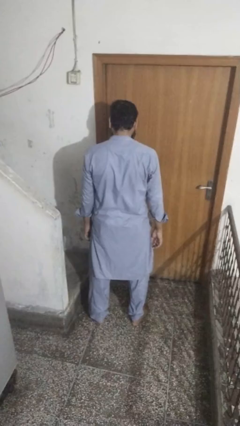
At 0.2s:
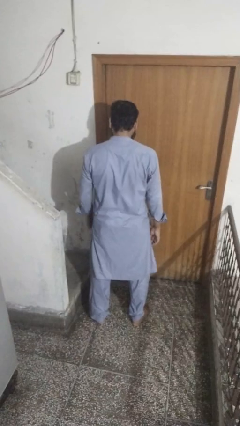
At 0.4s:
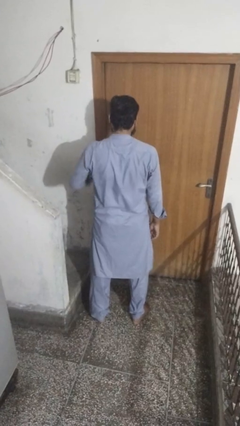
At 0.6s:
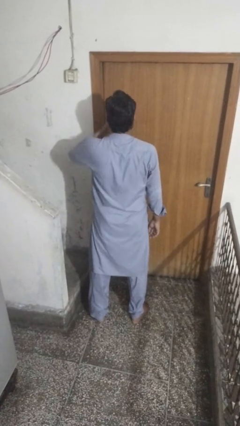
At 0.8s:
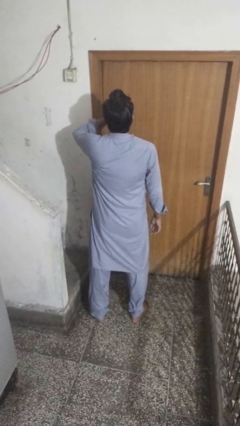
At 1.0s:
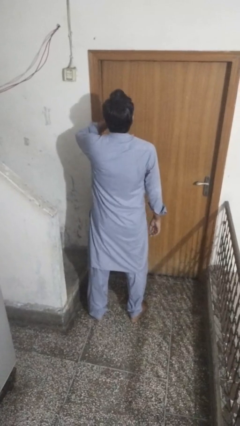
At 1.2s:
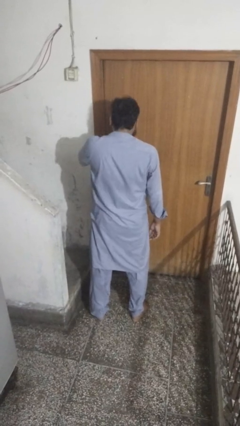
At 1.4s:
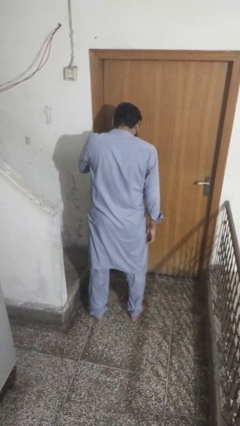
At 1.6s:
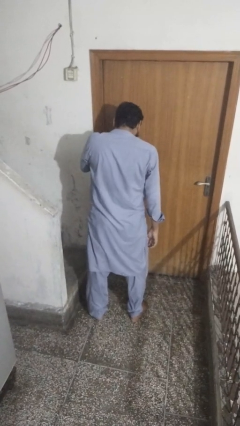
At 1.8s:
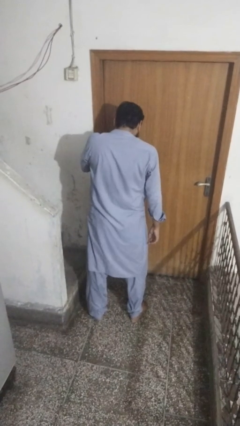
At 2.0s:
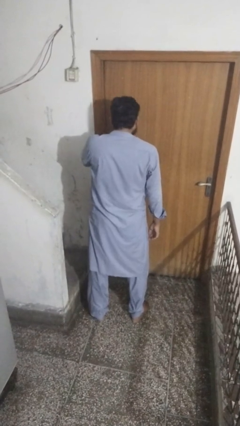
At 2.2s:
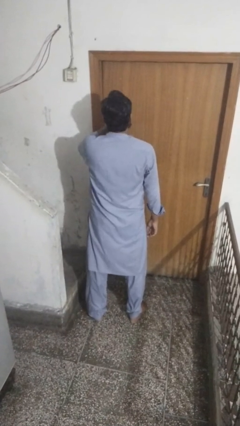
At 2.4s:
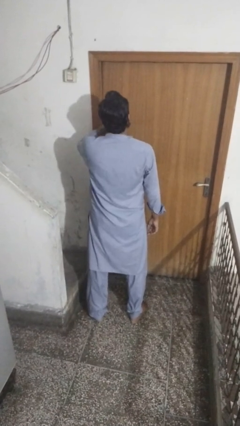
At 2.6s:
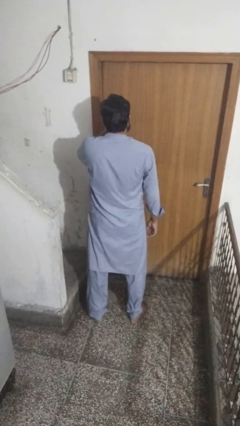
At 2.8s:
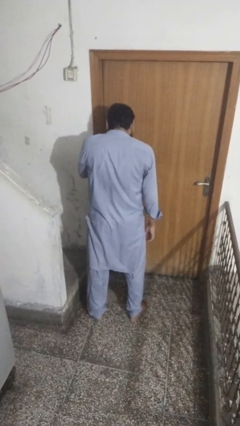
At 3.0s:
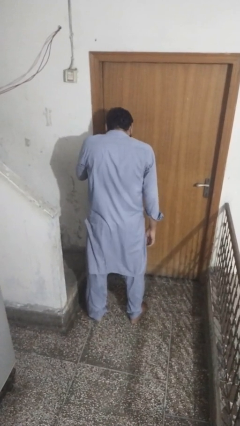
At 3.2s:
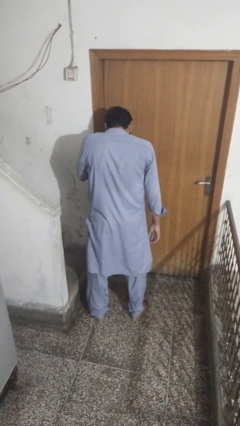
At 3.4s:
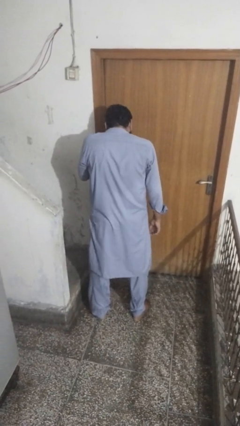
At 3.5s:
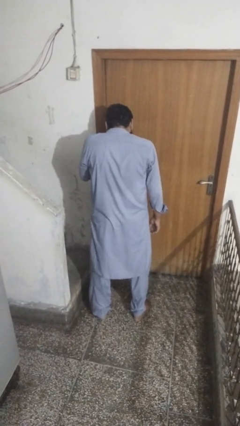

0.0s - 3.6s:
person sneezes into hand

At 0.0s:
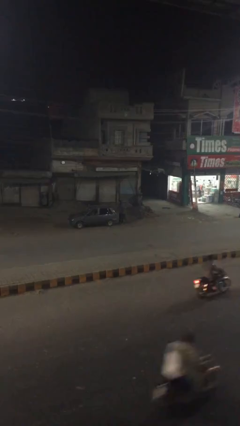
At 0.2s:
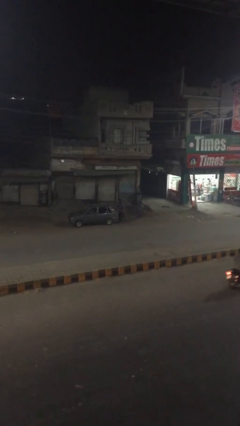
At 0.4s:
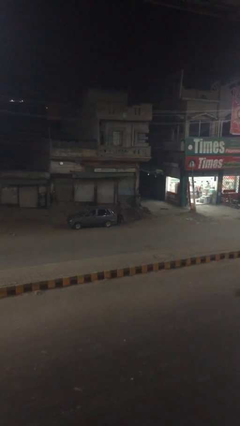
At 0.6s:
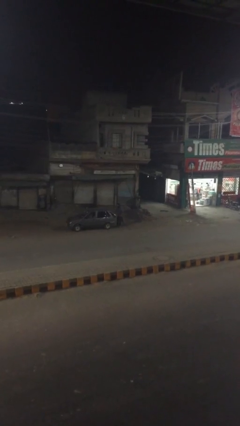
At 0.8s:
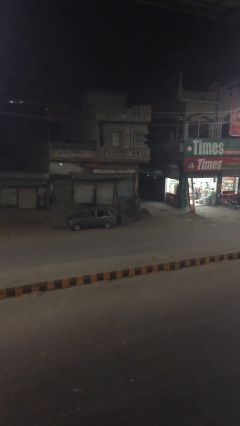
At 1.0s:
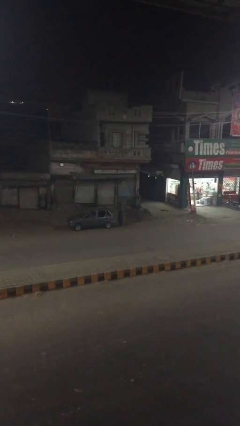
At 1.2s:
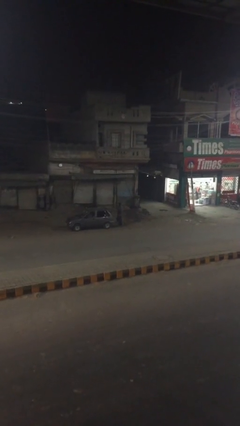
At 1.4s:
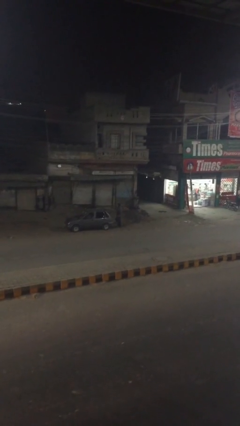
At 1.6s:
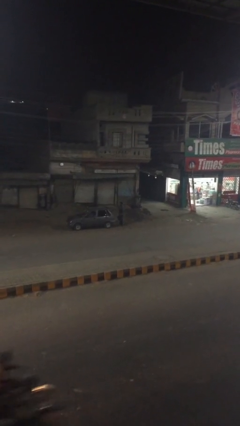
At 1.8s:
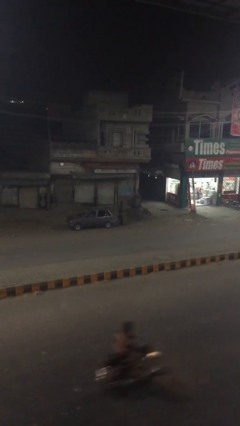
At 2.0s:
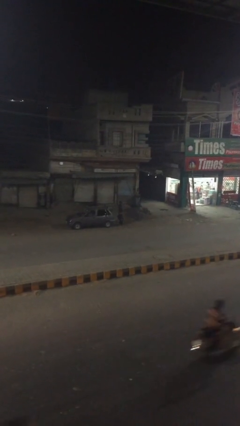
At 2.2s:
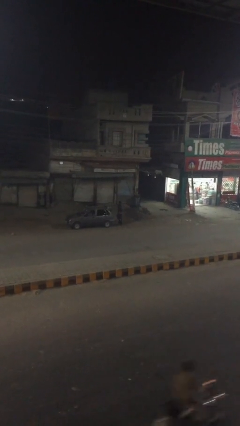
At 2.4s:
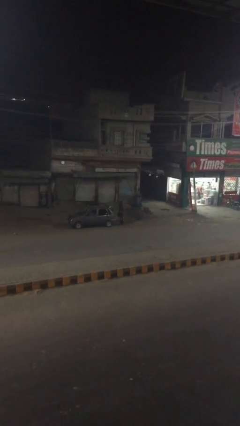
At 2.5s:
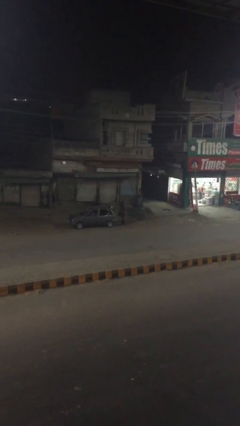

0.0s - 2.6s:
person opens car trunk

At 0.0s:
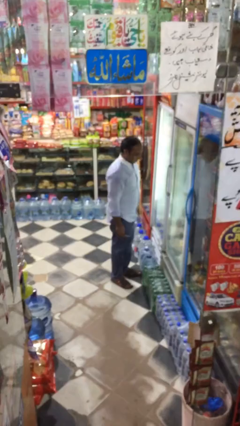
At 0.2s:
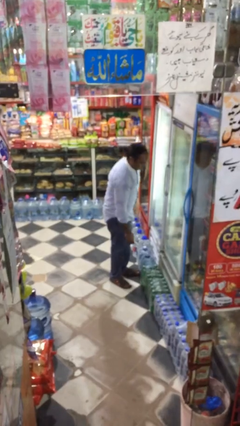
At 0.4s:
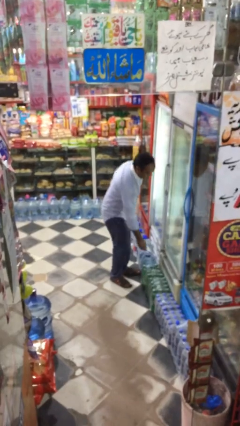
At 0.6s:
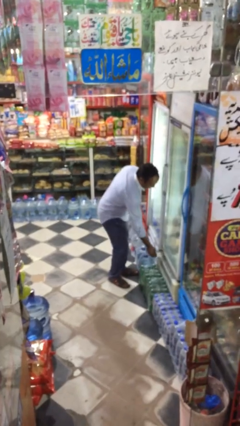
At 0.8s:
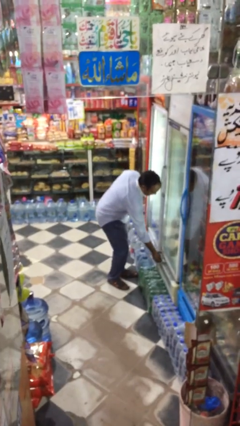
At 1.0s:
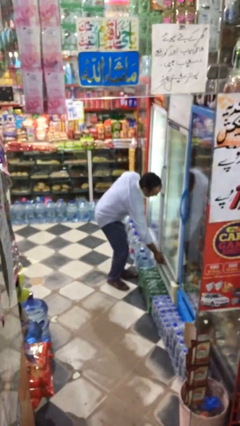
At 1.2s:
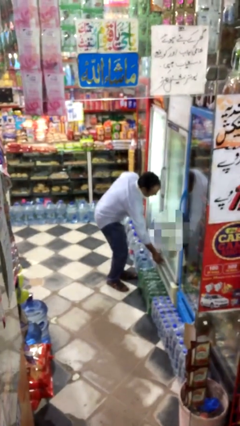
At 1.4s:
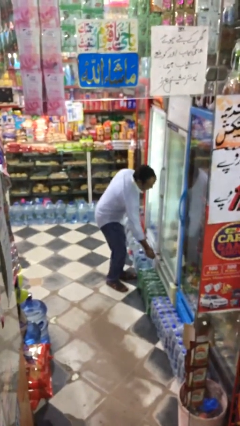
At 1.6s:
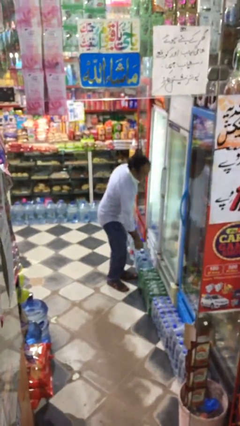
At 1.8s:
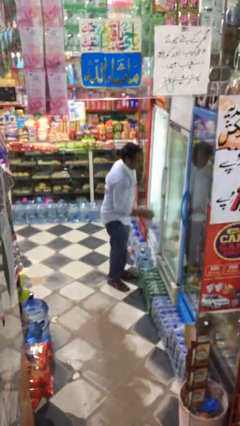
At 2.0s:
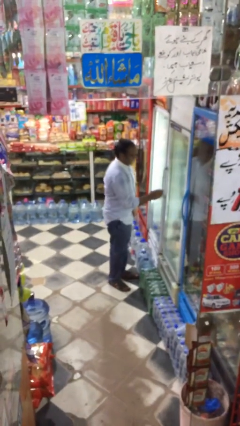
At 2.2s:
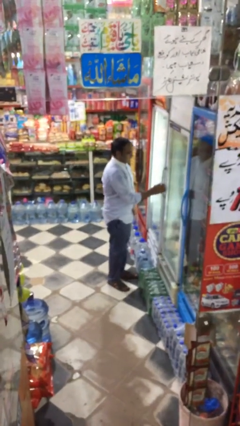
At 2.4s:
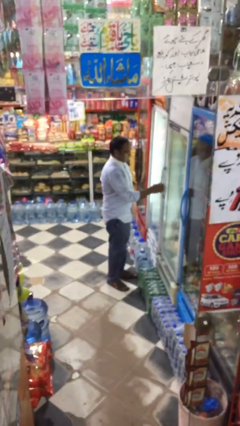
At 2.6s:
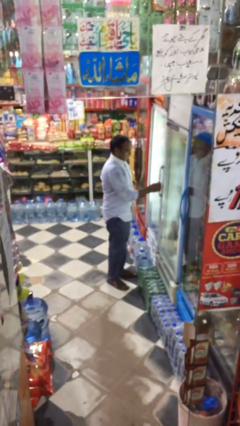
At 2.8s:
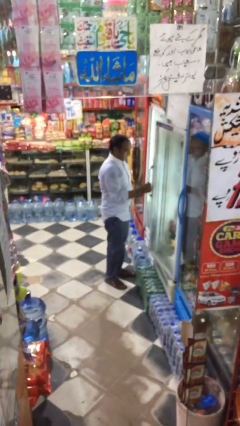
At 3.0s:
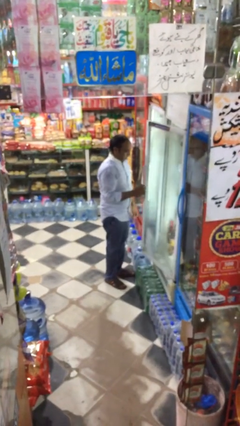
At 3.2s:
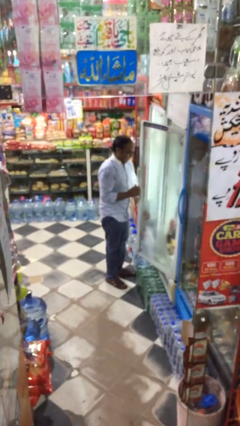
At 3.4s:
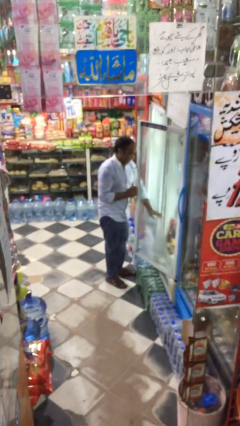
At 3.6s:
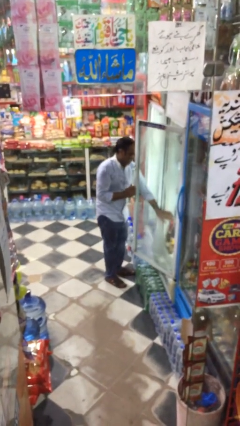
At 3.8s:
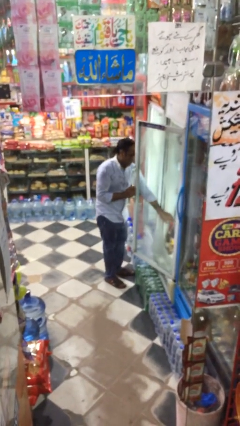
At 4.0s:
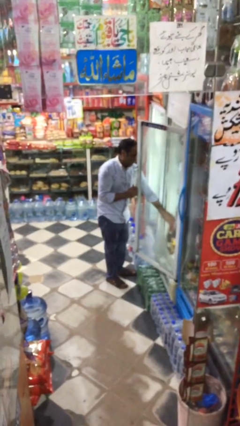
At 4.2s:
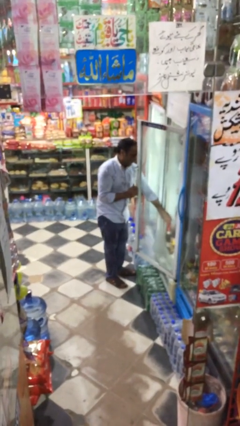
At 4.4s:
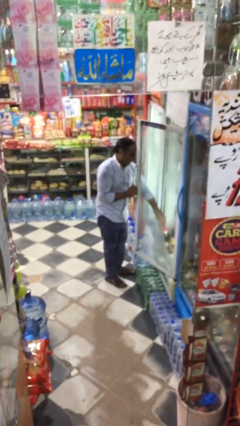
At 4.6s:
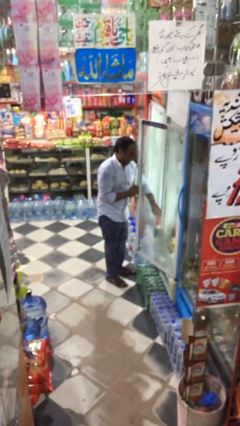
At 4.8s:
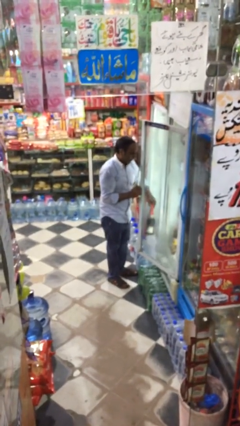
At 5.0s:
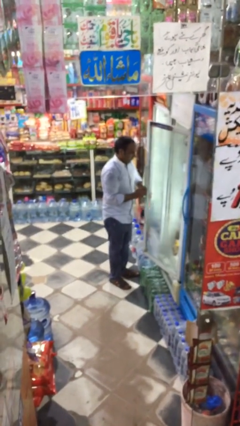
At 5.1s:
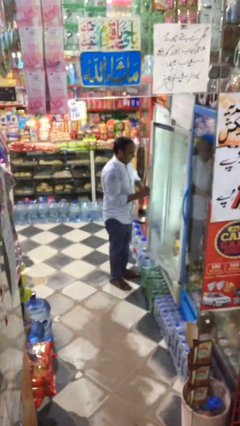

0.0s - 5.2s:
person purchases from machine

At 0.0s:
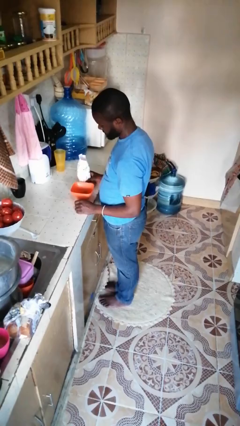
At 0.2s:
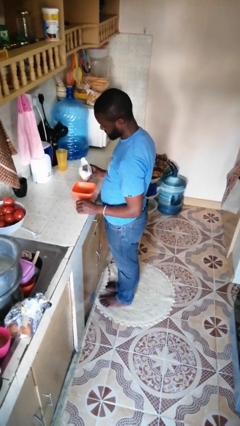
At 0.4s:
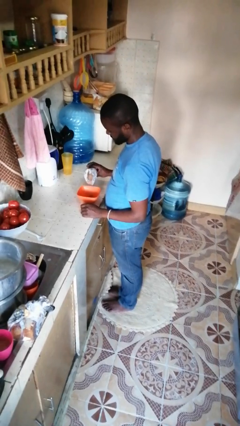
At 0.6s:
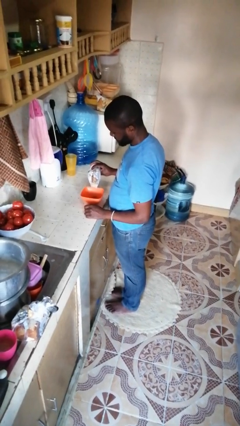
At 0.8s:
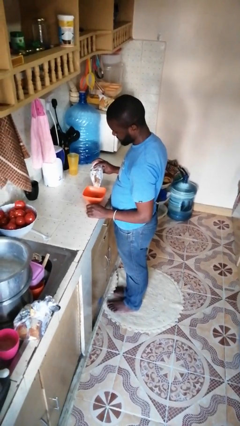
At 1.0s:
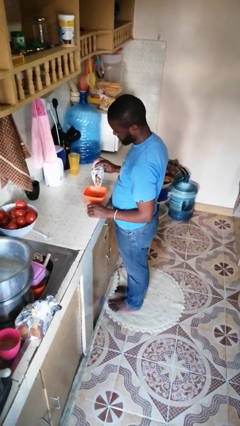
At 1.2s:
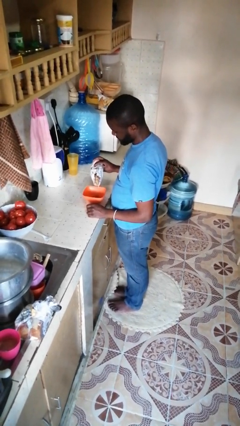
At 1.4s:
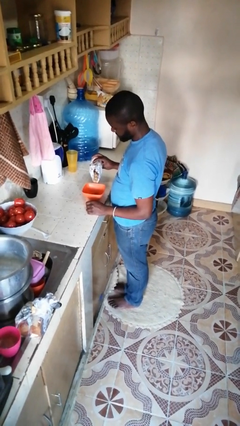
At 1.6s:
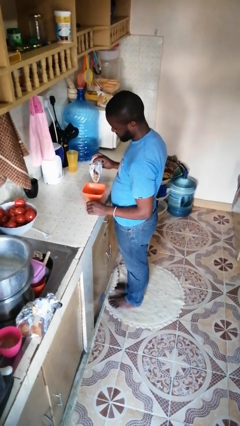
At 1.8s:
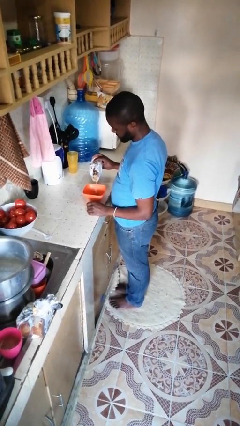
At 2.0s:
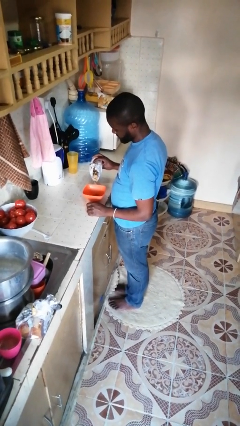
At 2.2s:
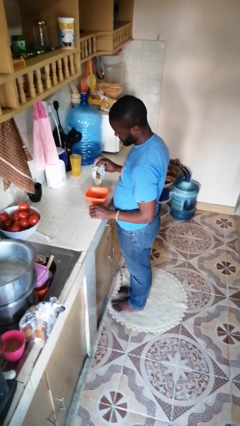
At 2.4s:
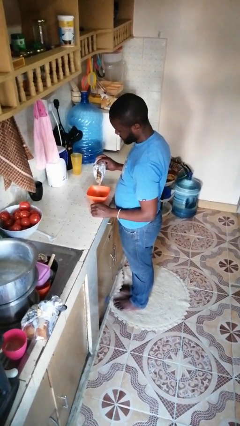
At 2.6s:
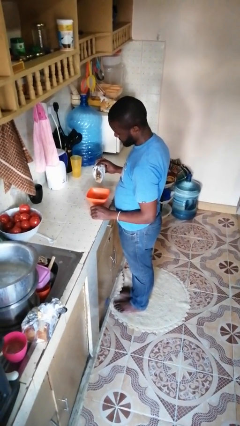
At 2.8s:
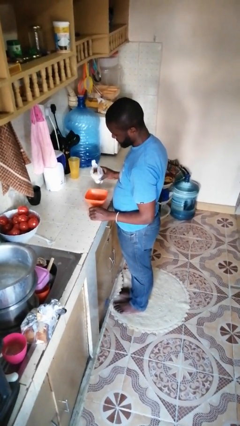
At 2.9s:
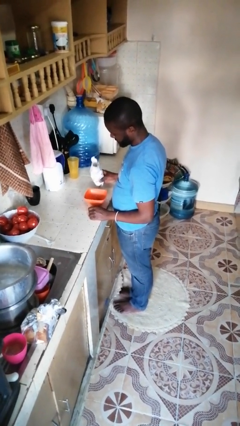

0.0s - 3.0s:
person pours into bowl

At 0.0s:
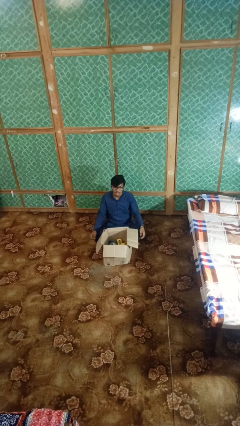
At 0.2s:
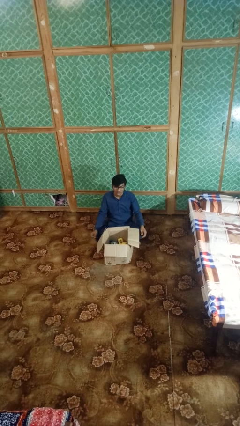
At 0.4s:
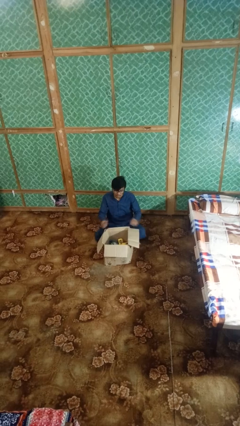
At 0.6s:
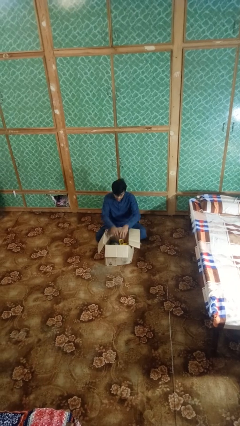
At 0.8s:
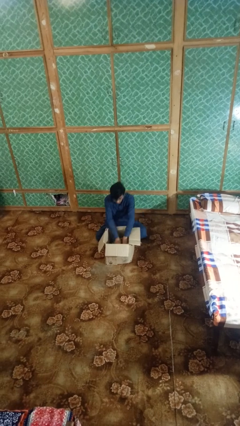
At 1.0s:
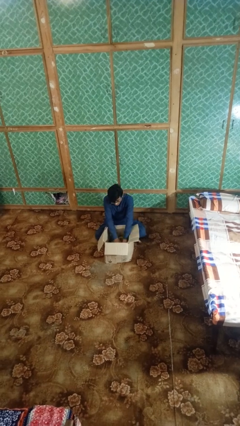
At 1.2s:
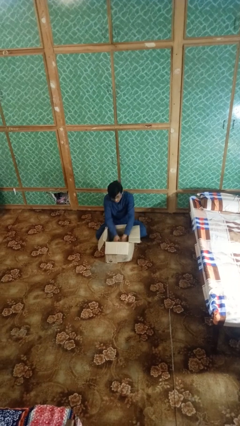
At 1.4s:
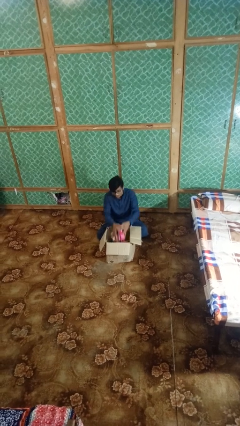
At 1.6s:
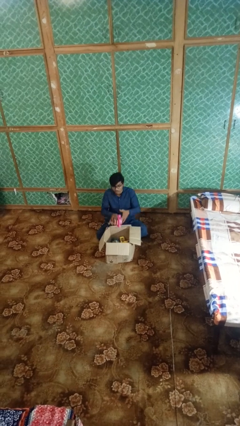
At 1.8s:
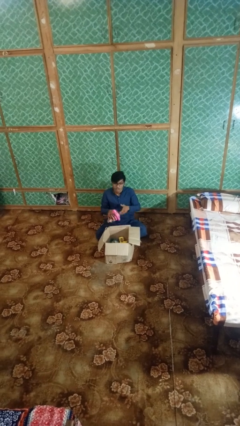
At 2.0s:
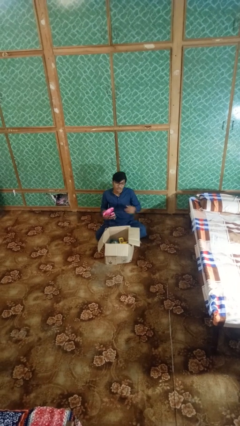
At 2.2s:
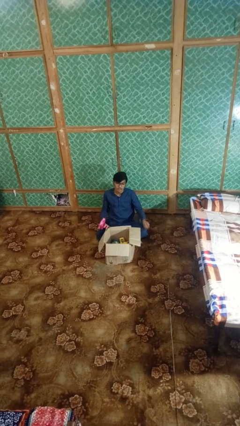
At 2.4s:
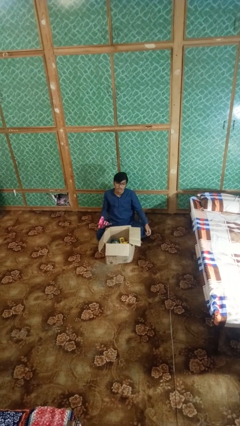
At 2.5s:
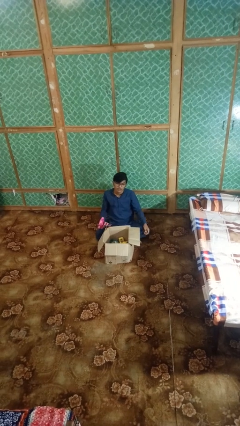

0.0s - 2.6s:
person takes object from box

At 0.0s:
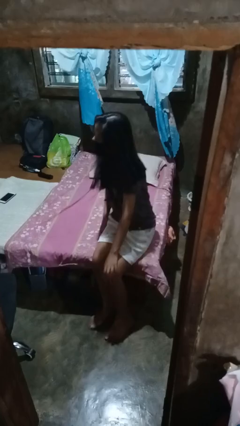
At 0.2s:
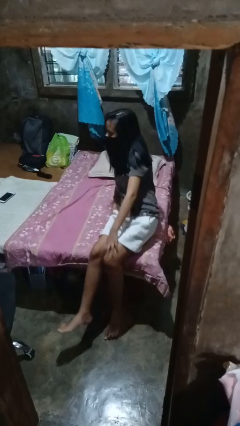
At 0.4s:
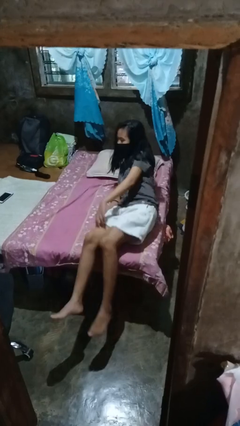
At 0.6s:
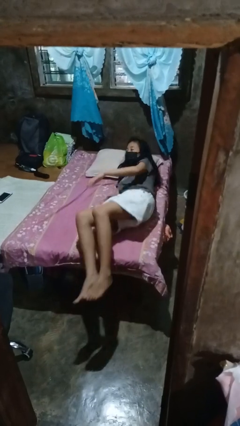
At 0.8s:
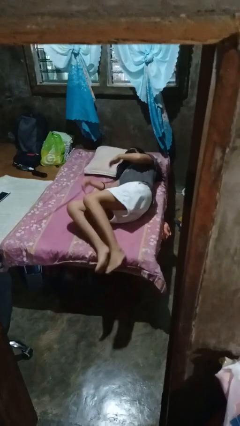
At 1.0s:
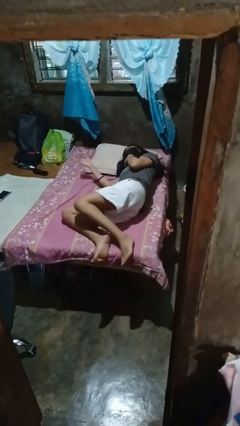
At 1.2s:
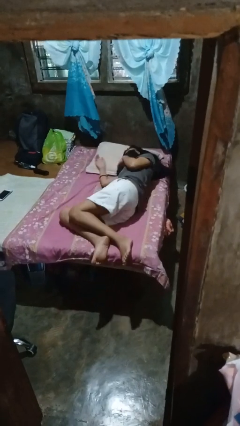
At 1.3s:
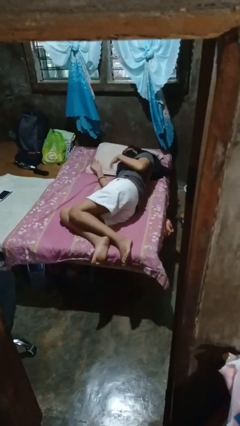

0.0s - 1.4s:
person lies down on bed
